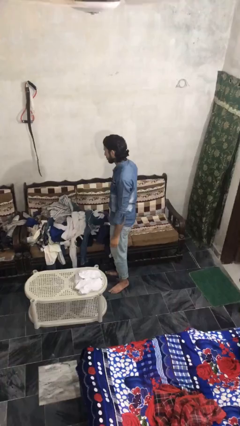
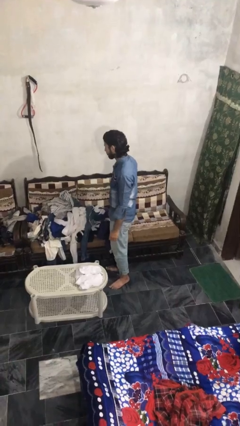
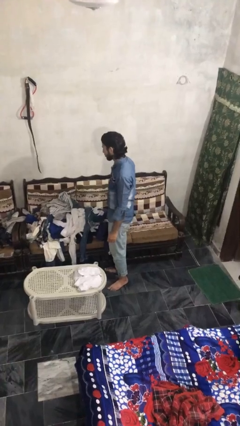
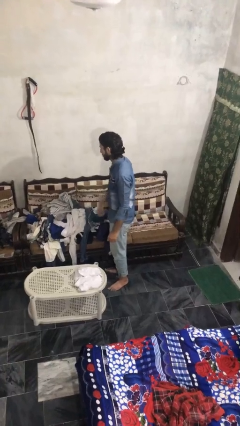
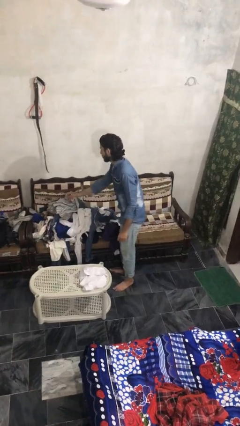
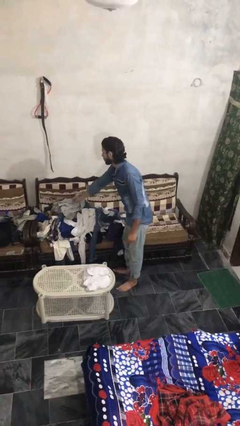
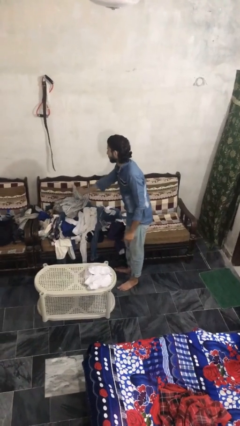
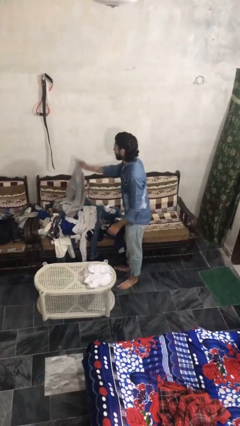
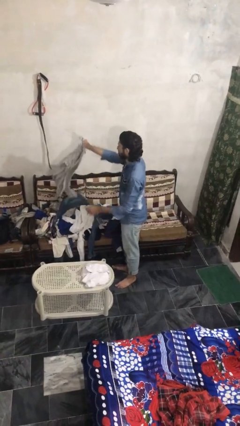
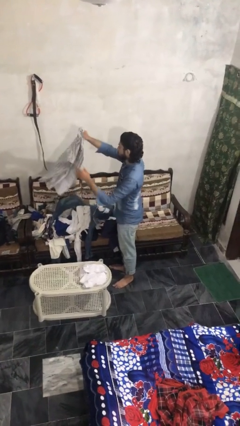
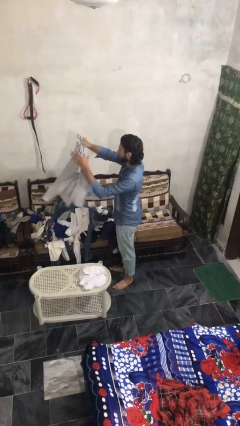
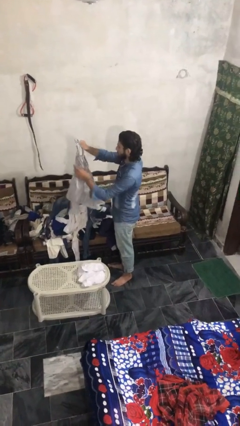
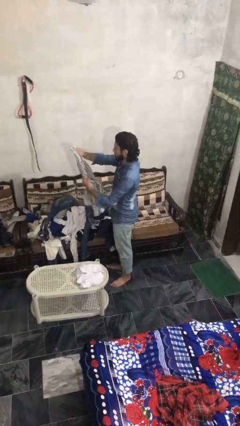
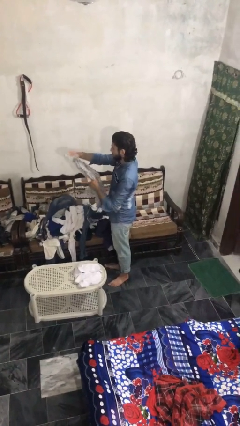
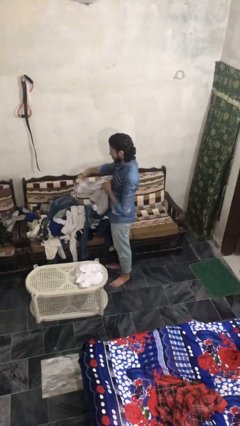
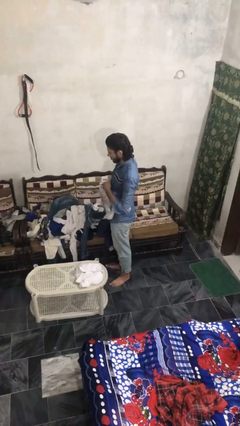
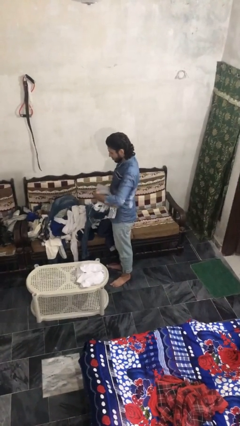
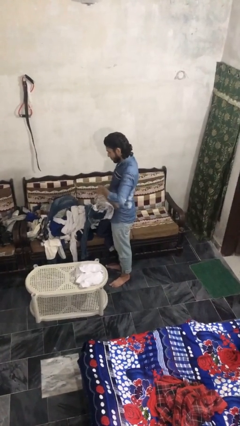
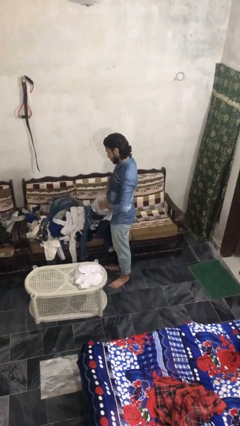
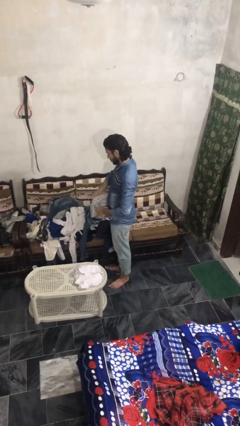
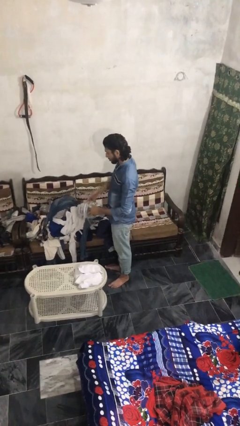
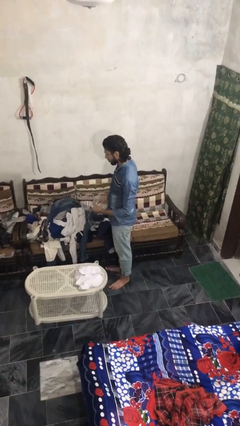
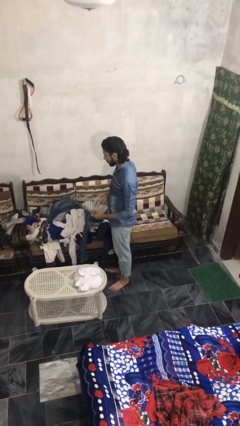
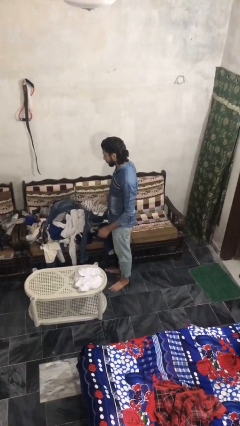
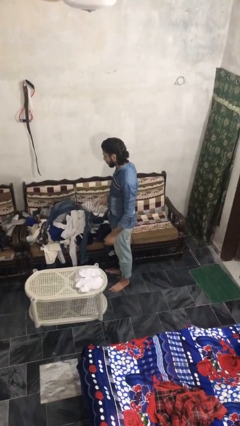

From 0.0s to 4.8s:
person folds shirt

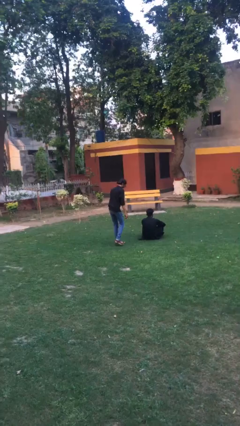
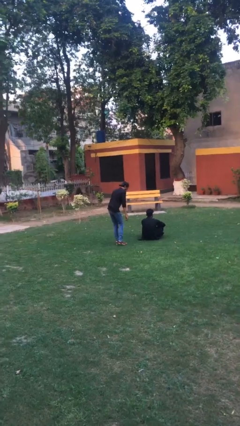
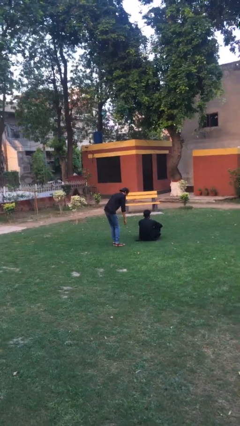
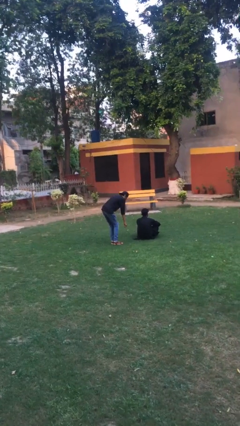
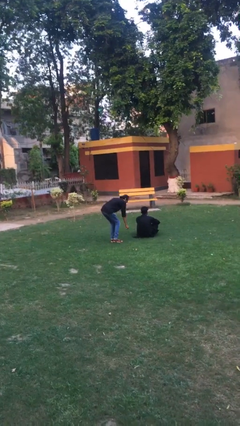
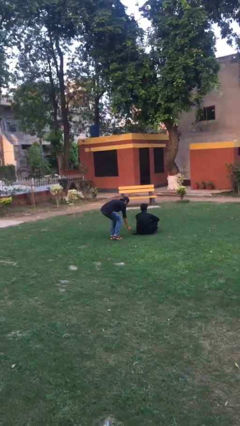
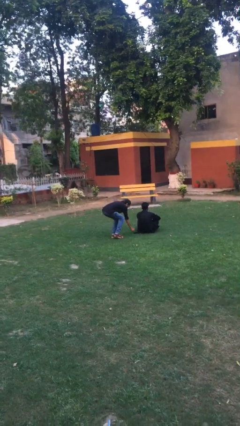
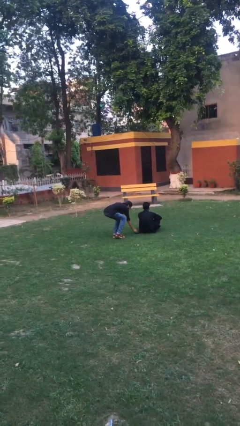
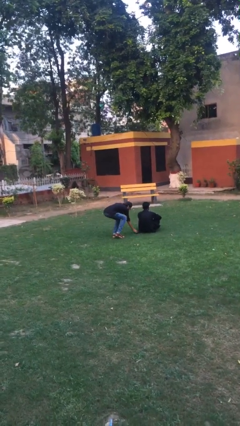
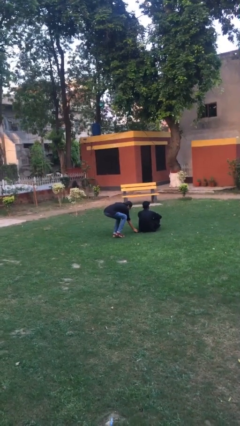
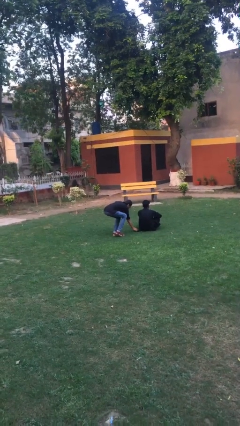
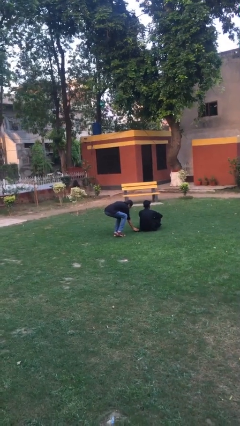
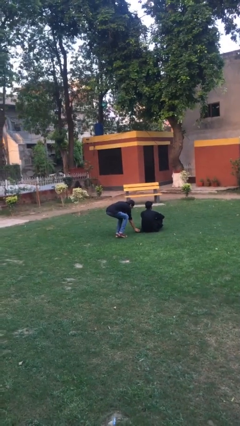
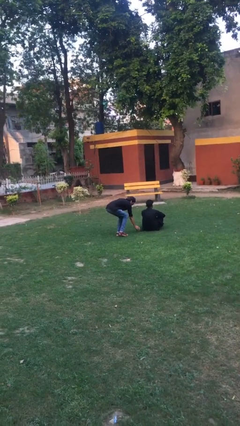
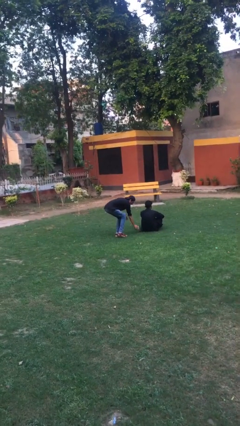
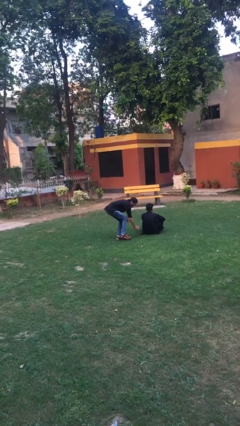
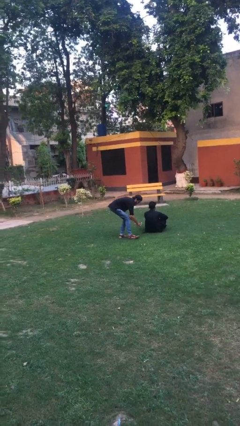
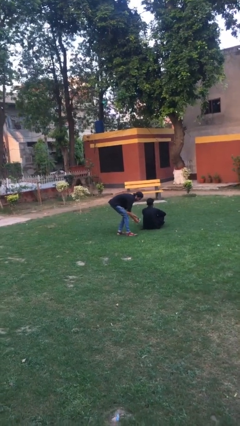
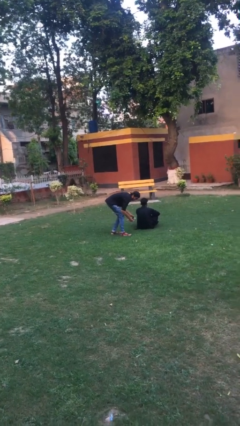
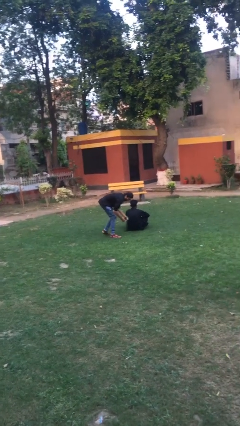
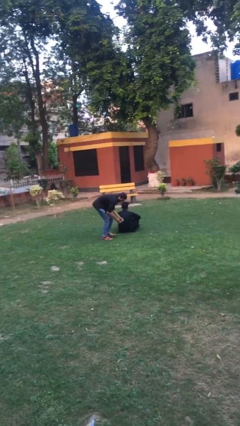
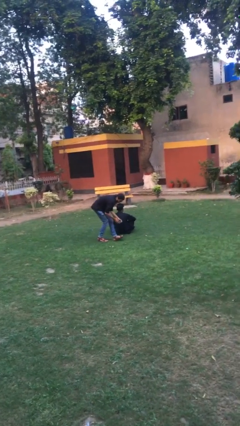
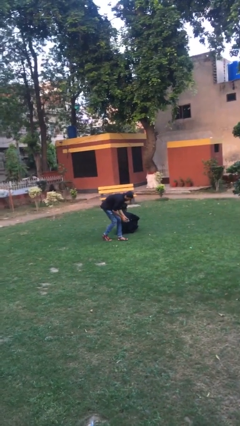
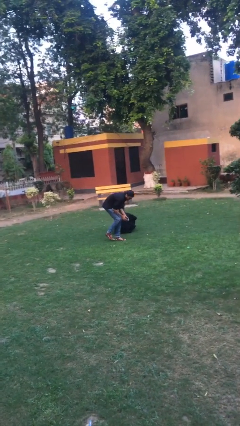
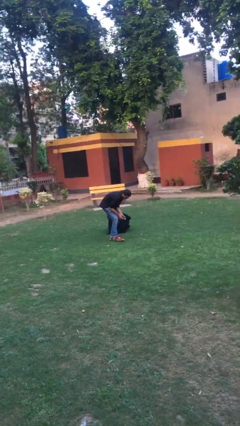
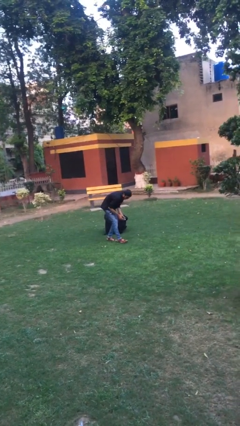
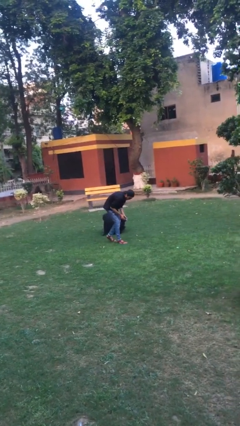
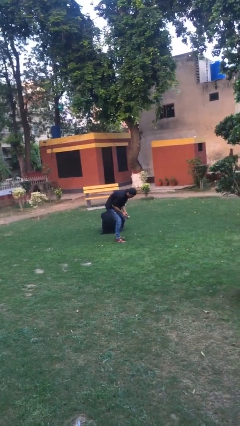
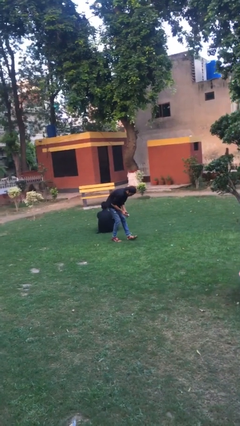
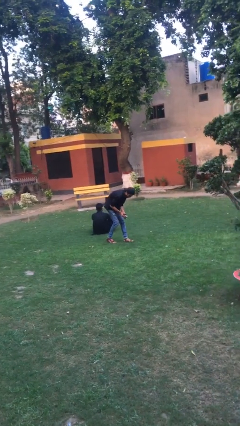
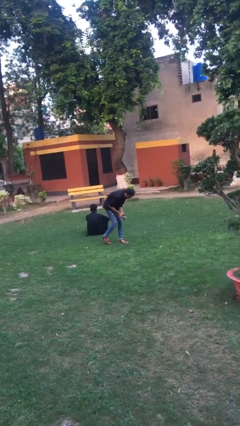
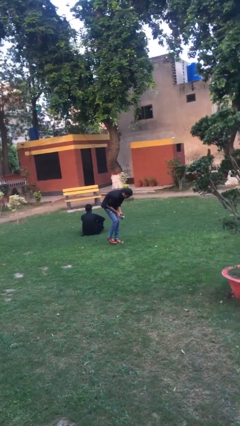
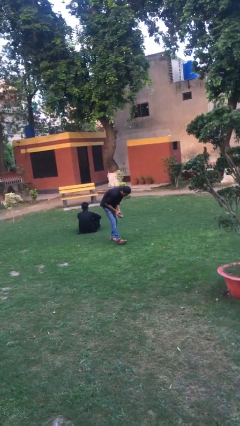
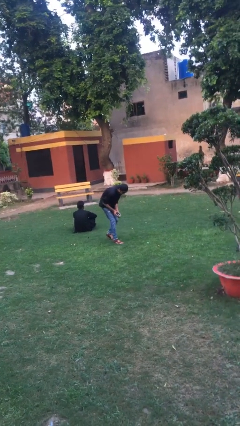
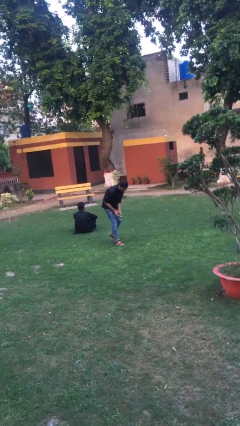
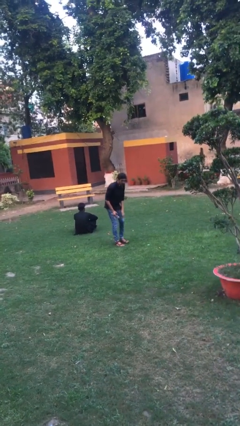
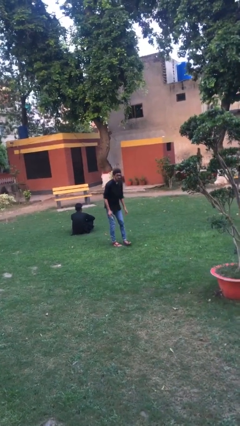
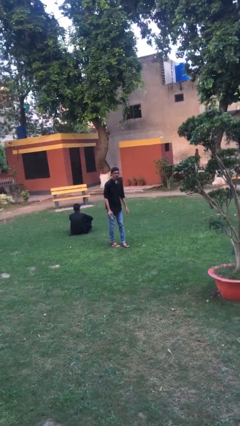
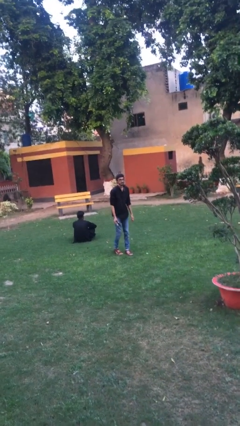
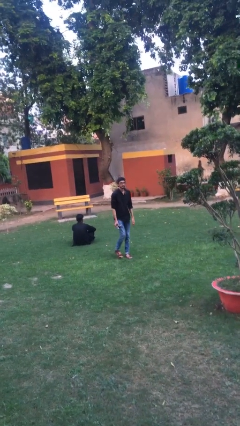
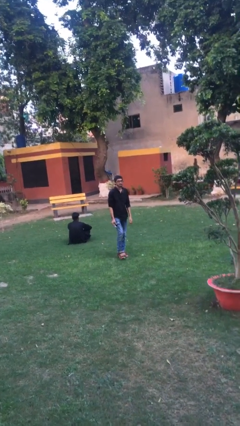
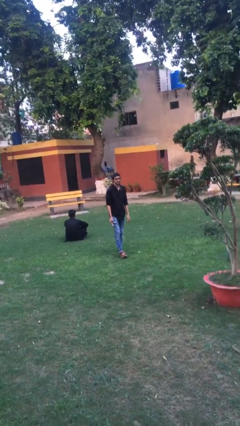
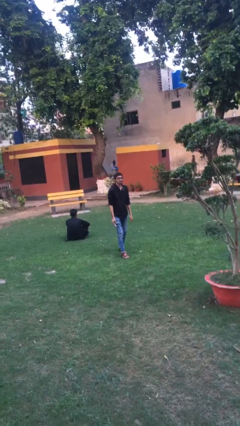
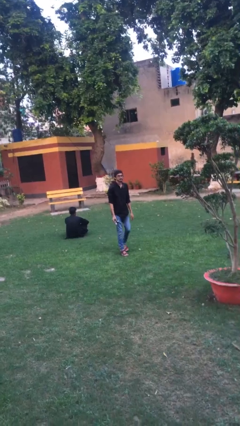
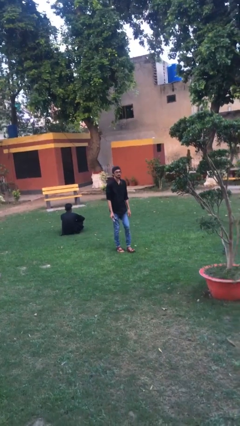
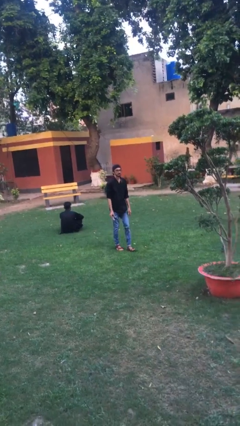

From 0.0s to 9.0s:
person steals object from person

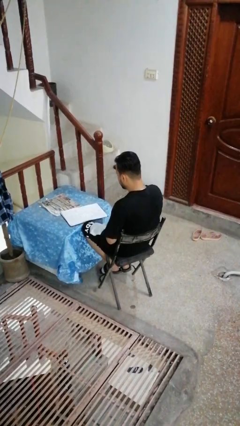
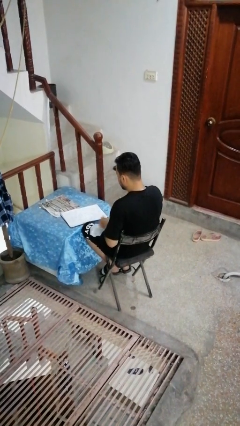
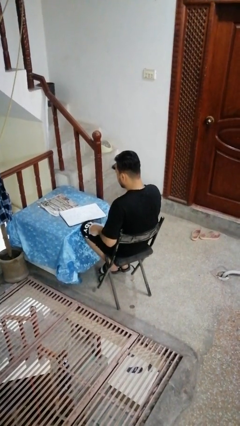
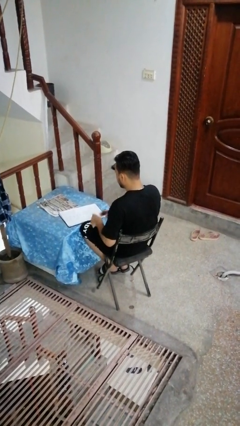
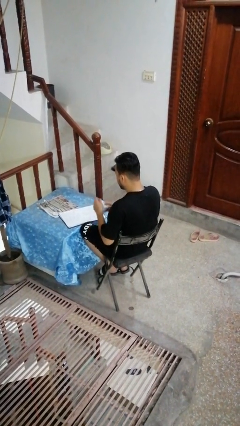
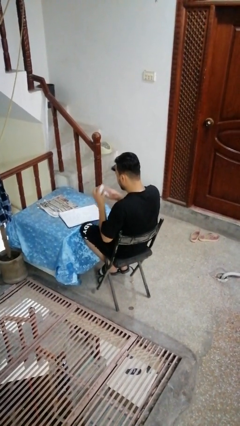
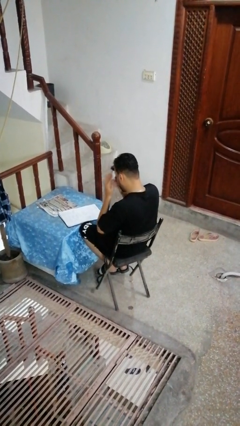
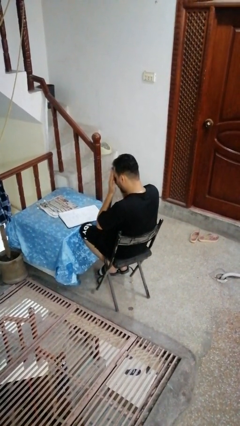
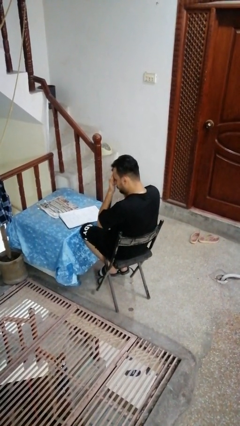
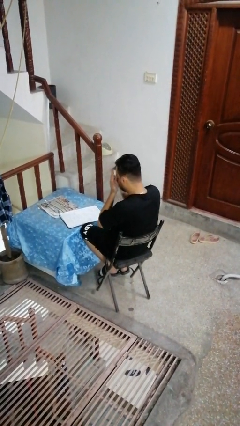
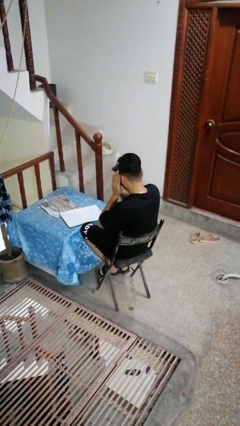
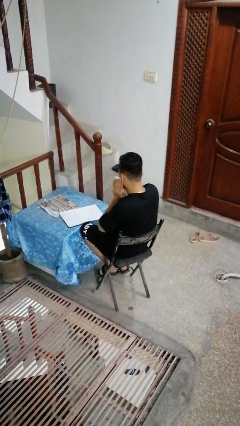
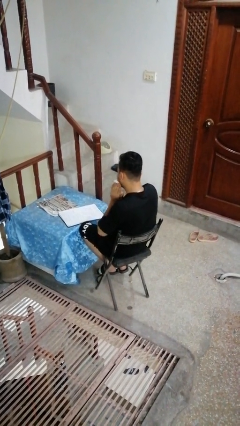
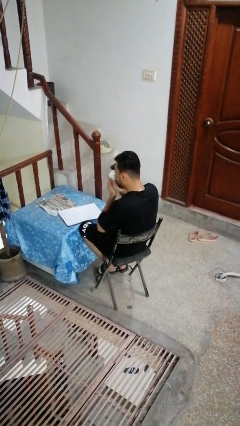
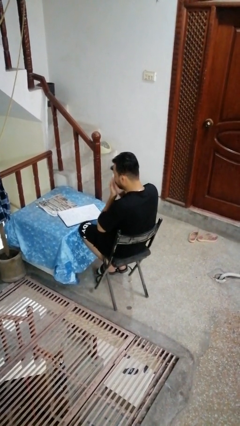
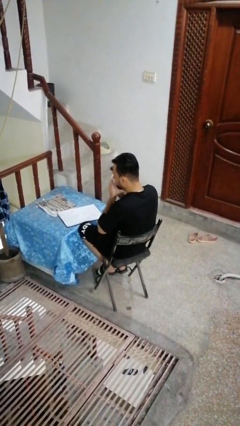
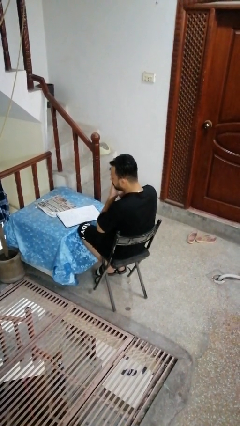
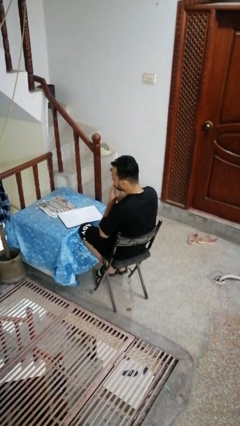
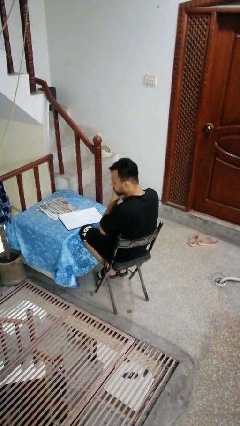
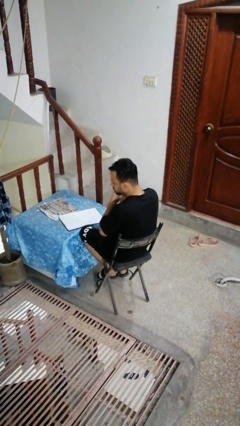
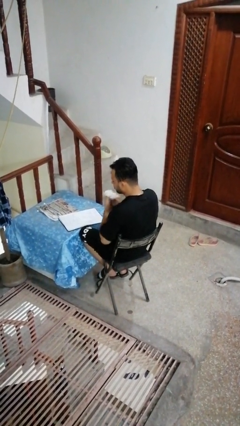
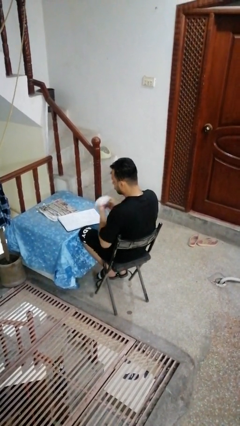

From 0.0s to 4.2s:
person wipes mouth with napkin
